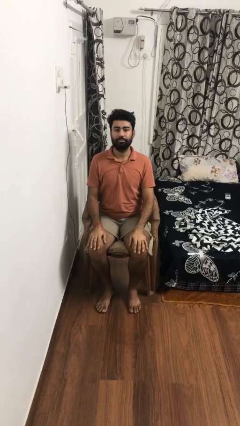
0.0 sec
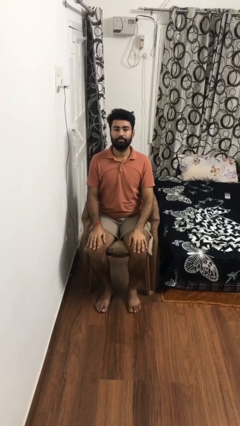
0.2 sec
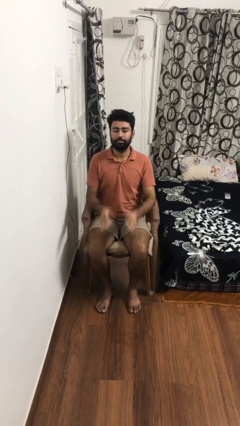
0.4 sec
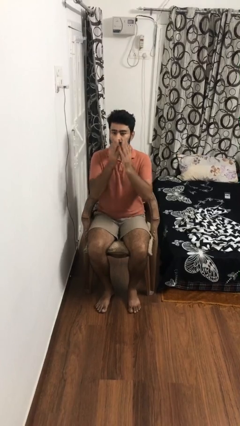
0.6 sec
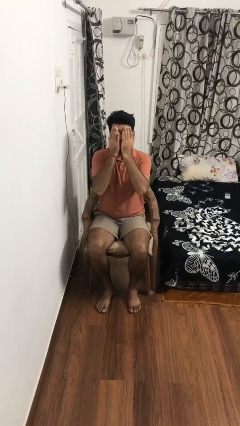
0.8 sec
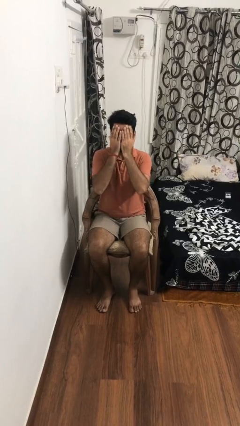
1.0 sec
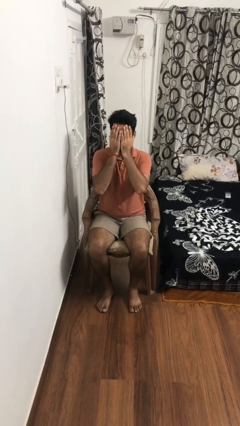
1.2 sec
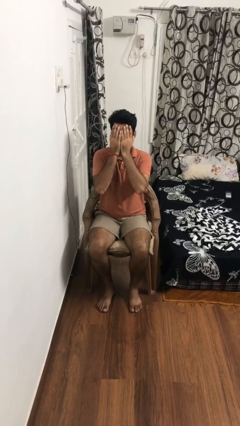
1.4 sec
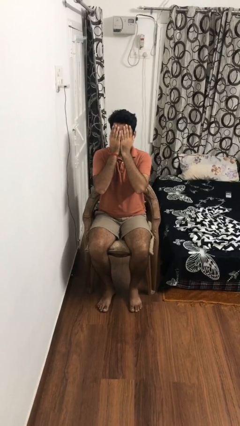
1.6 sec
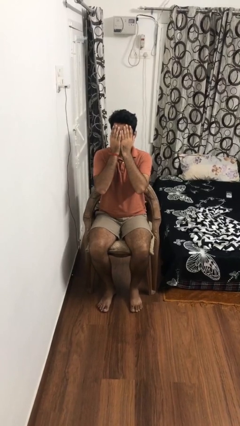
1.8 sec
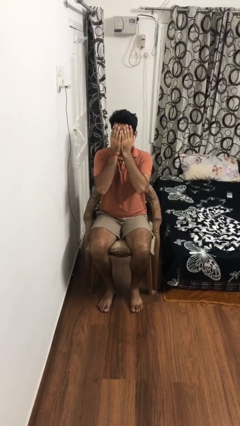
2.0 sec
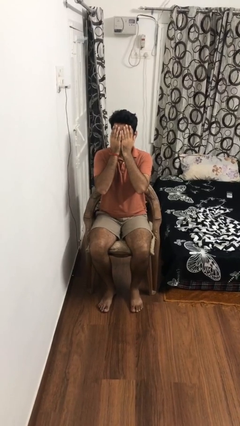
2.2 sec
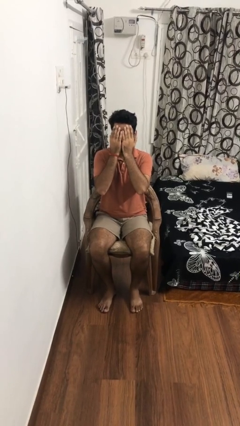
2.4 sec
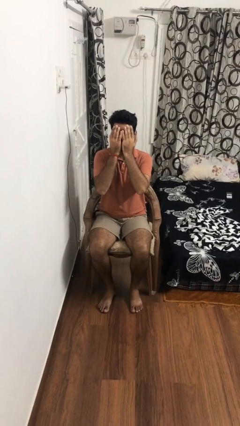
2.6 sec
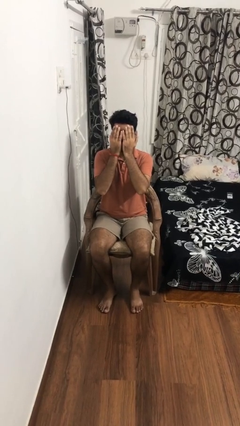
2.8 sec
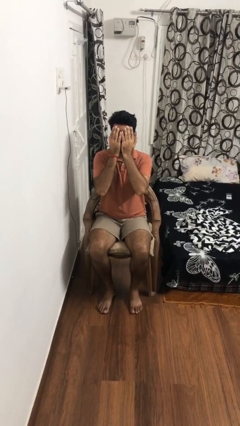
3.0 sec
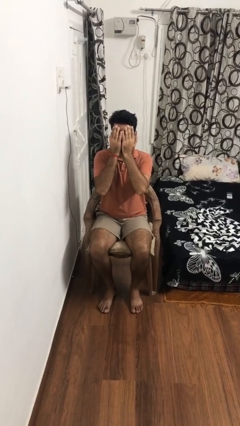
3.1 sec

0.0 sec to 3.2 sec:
person covers face with hands

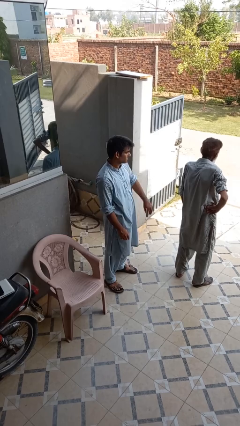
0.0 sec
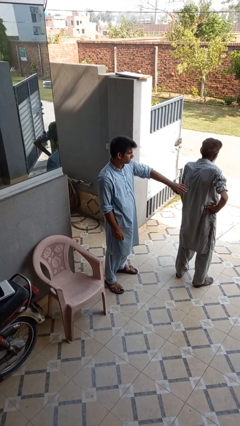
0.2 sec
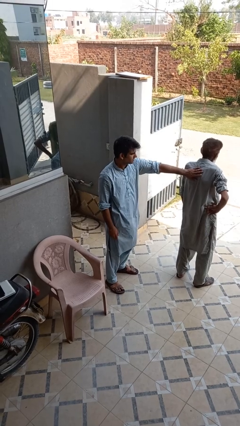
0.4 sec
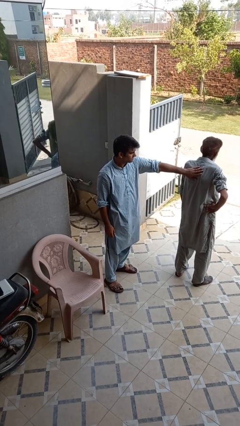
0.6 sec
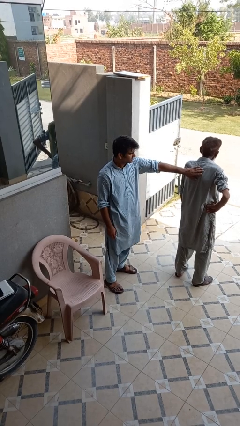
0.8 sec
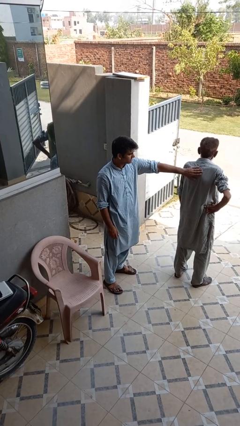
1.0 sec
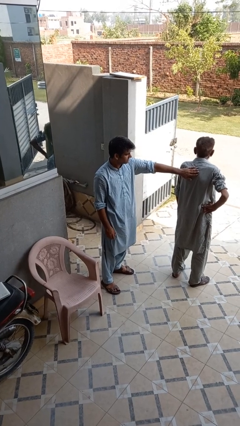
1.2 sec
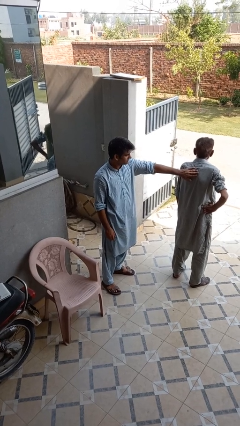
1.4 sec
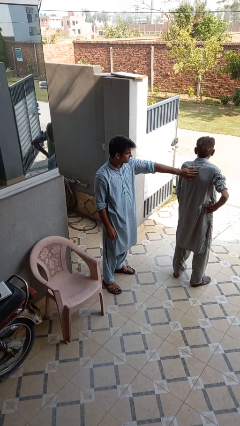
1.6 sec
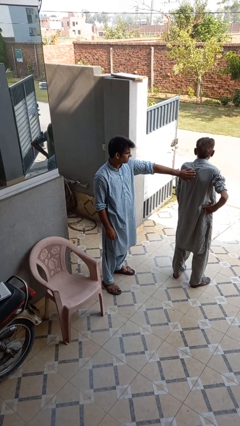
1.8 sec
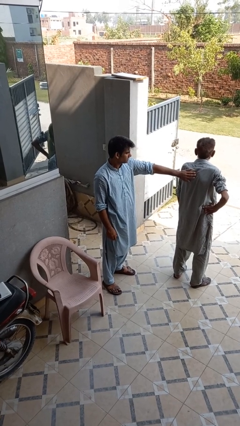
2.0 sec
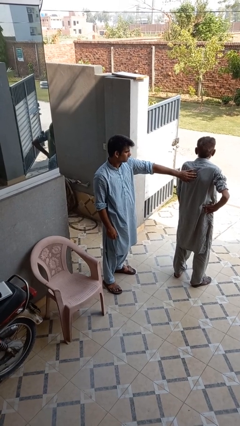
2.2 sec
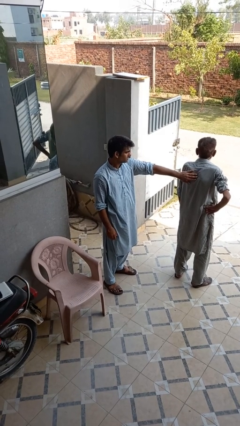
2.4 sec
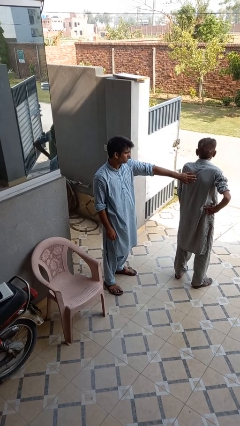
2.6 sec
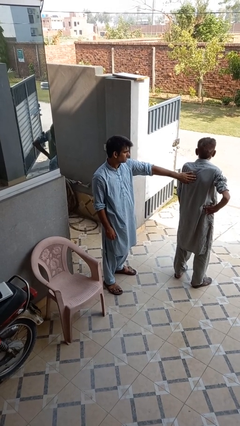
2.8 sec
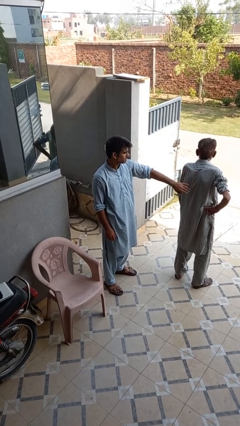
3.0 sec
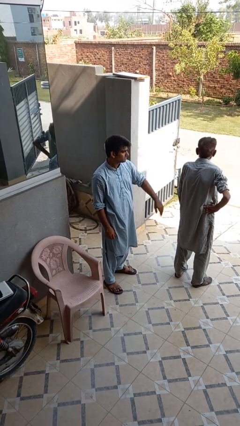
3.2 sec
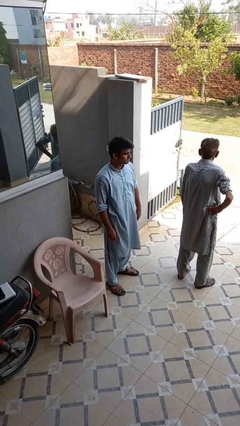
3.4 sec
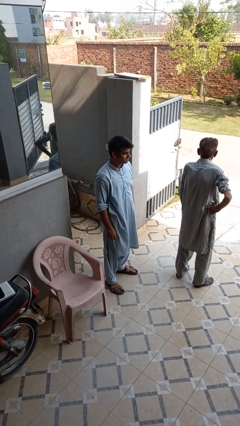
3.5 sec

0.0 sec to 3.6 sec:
person touches back of person

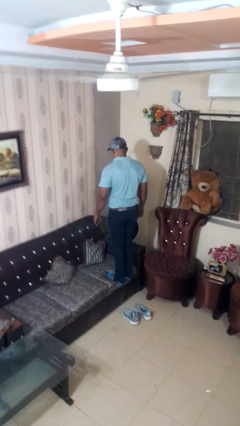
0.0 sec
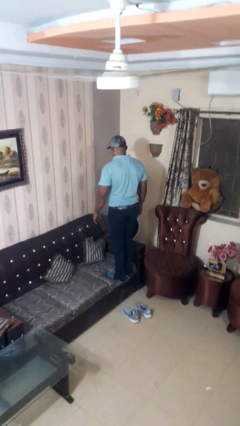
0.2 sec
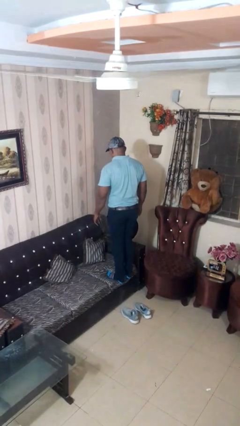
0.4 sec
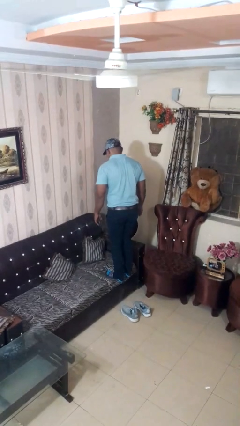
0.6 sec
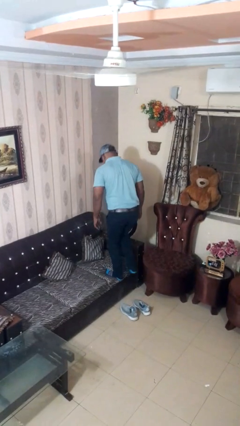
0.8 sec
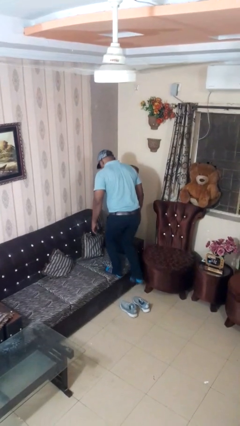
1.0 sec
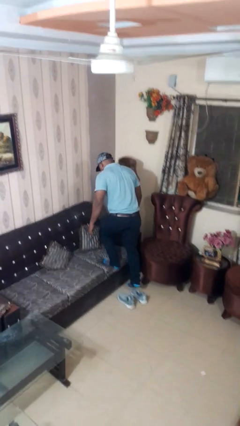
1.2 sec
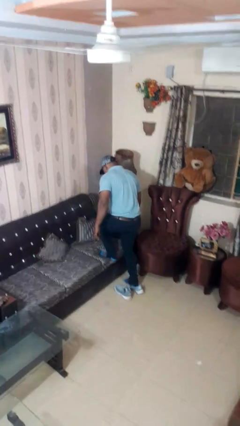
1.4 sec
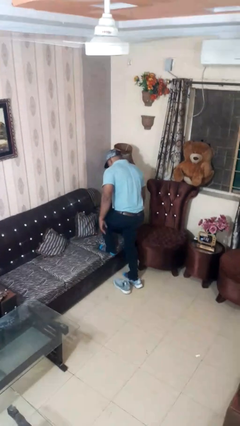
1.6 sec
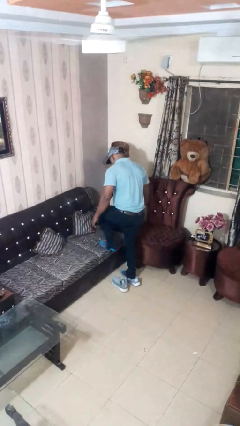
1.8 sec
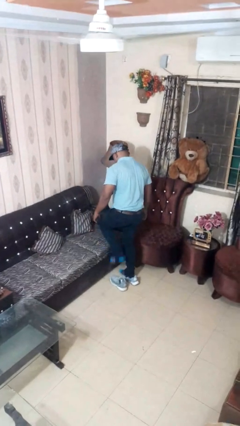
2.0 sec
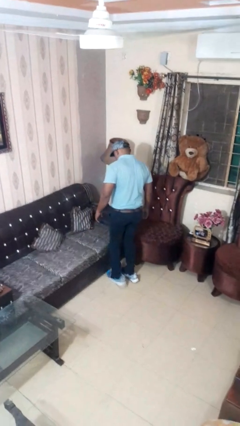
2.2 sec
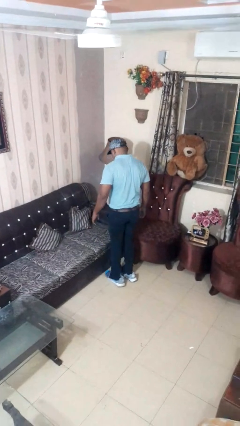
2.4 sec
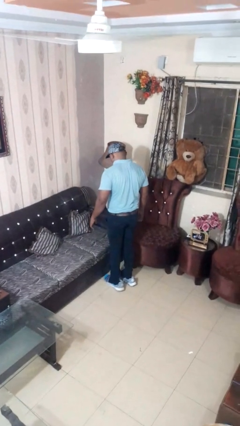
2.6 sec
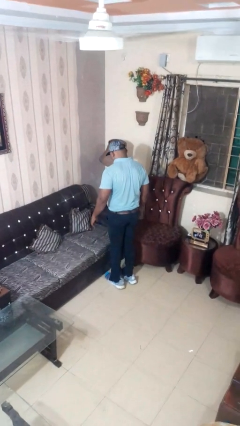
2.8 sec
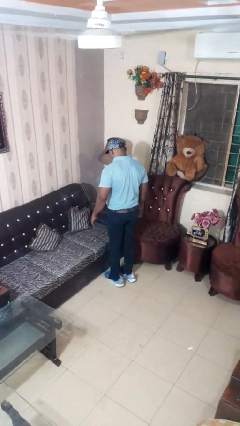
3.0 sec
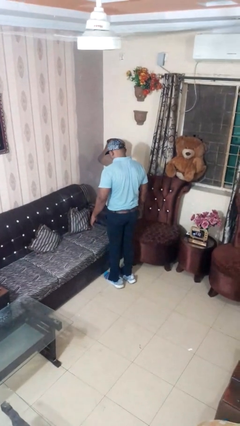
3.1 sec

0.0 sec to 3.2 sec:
person climbs off couch

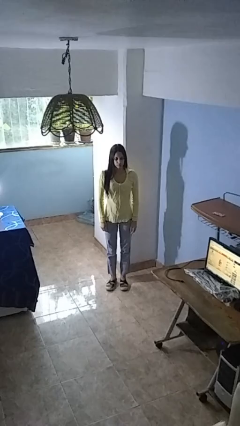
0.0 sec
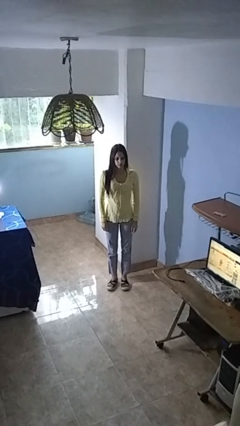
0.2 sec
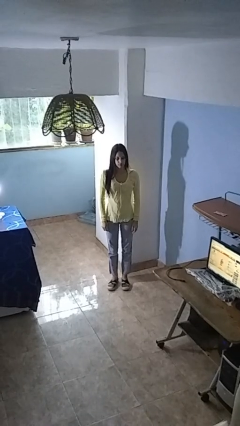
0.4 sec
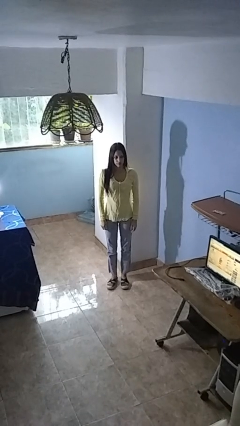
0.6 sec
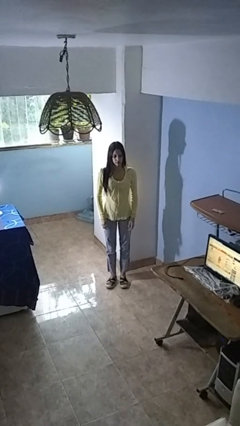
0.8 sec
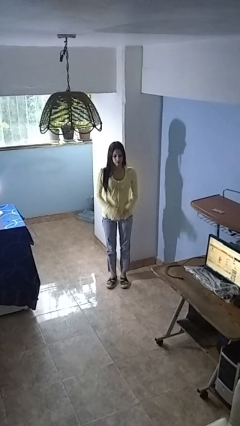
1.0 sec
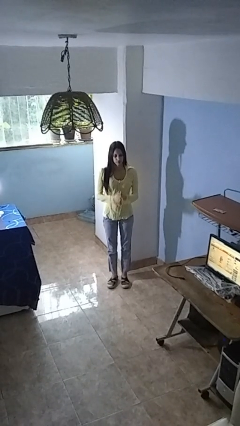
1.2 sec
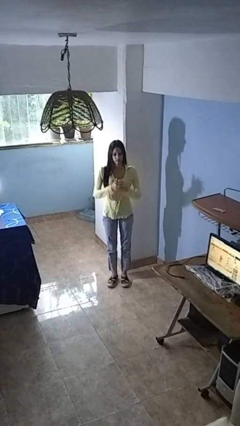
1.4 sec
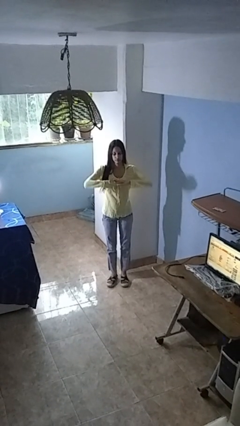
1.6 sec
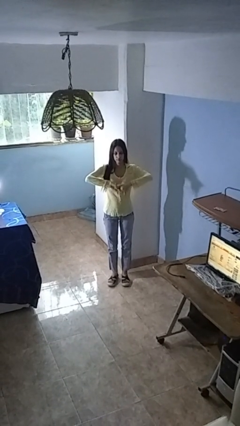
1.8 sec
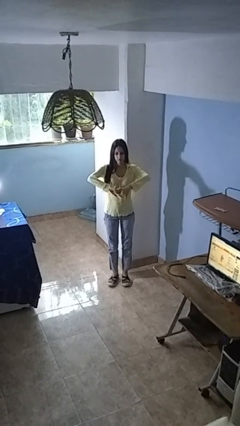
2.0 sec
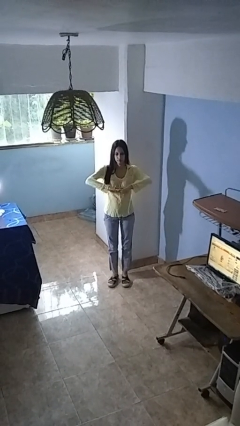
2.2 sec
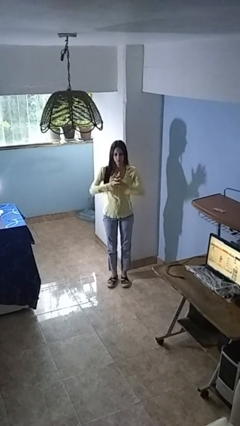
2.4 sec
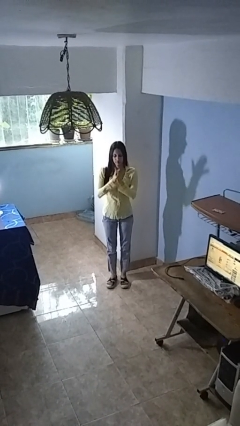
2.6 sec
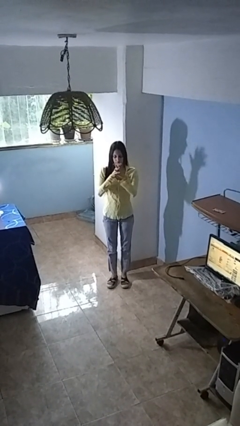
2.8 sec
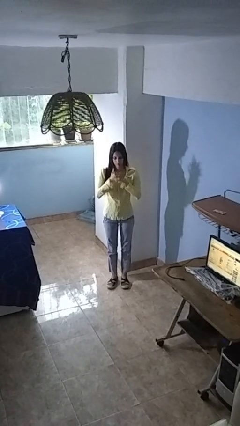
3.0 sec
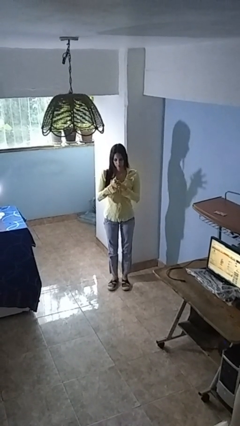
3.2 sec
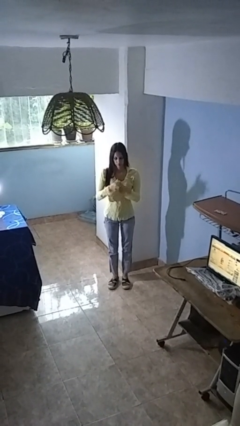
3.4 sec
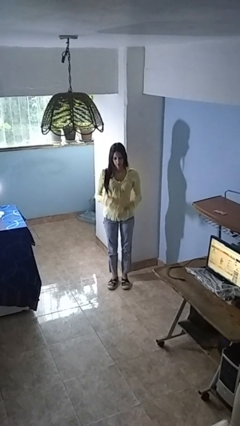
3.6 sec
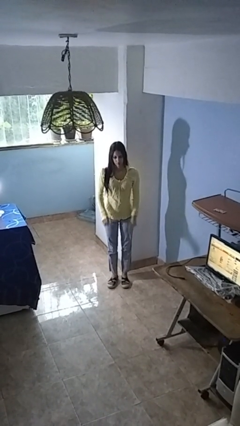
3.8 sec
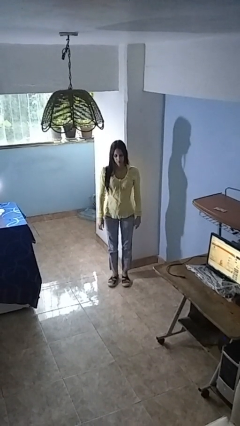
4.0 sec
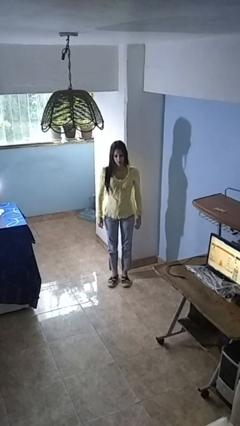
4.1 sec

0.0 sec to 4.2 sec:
person cracks knuckles

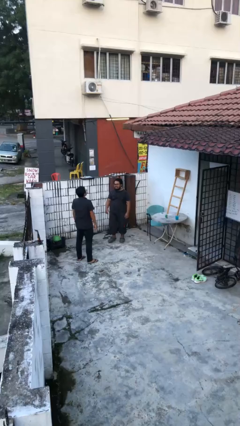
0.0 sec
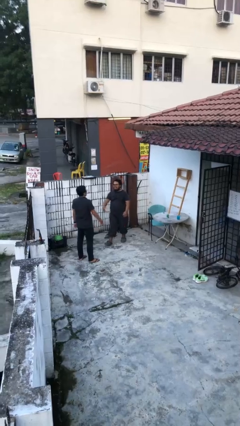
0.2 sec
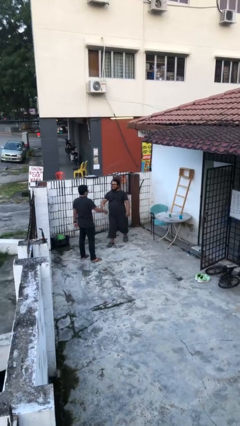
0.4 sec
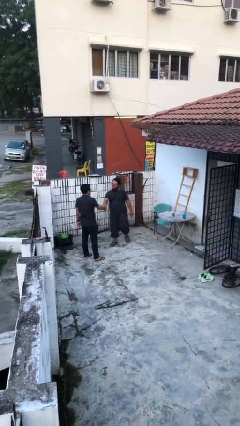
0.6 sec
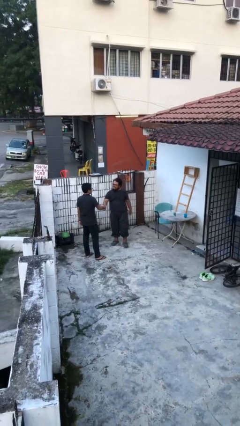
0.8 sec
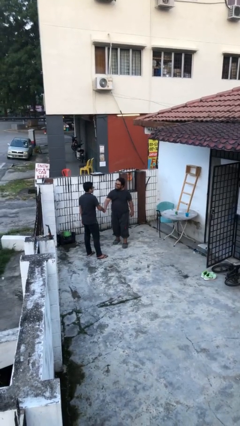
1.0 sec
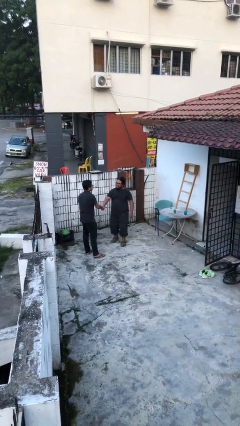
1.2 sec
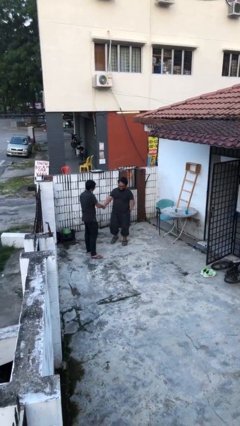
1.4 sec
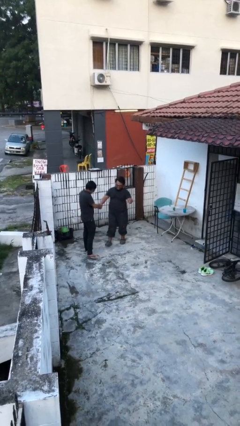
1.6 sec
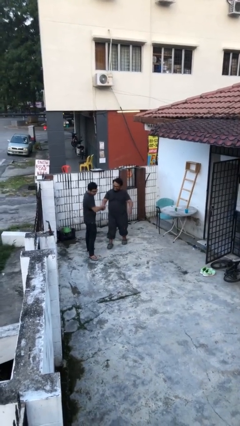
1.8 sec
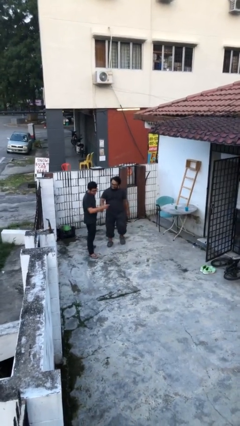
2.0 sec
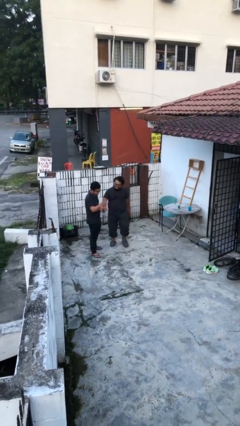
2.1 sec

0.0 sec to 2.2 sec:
person shakes hand

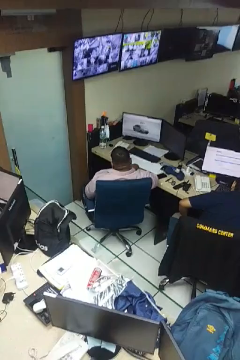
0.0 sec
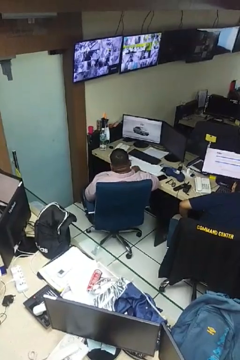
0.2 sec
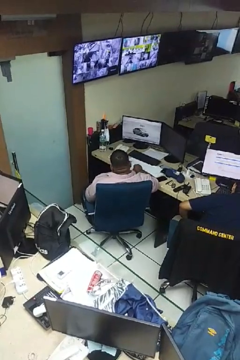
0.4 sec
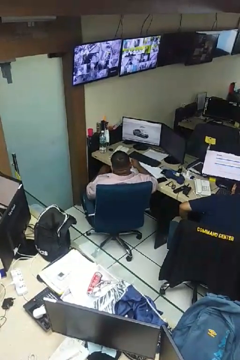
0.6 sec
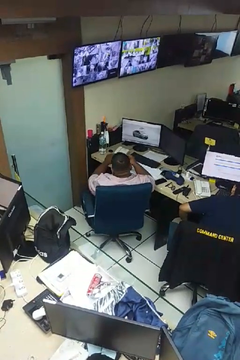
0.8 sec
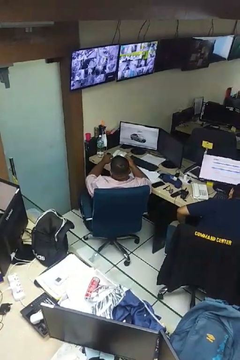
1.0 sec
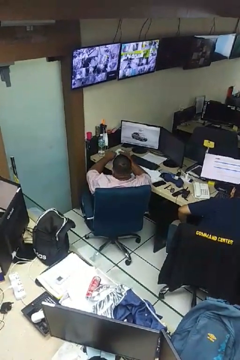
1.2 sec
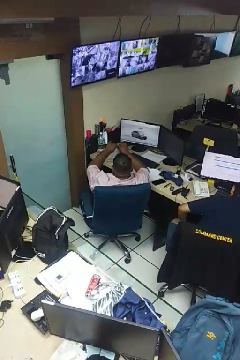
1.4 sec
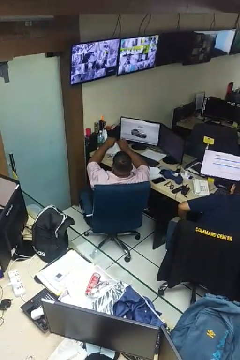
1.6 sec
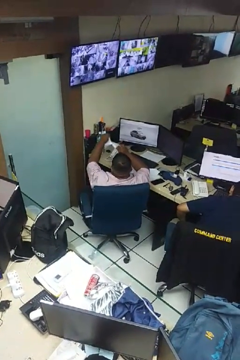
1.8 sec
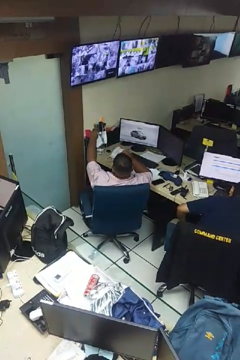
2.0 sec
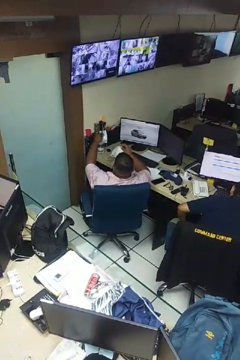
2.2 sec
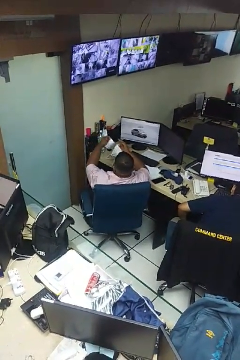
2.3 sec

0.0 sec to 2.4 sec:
person tears paper
